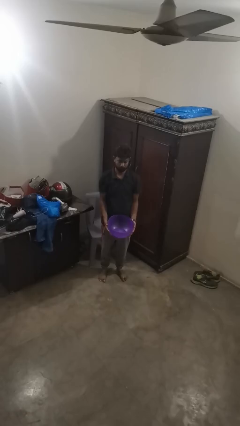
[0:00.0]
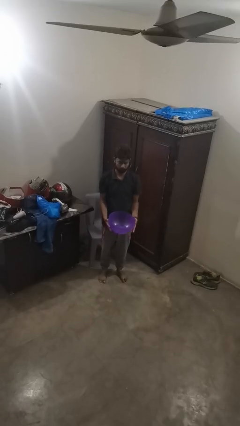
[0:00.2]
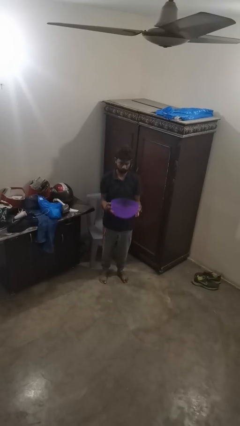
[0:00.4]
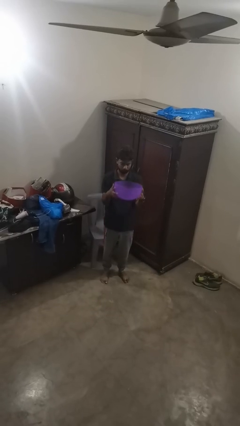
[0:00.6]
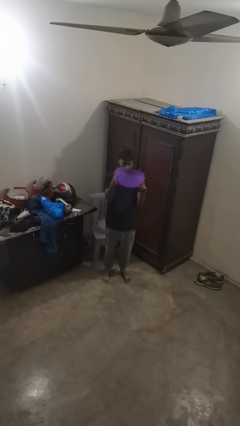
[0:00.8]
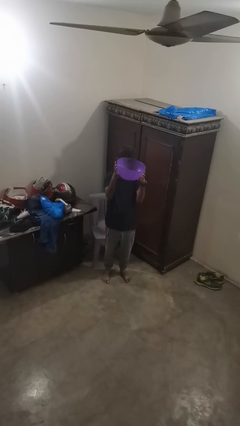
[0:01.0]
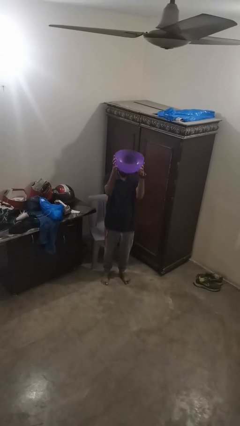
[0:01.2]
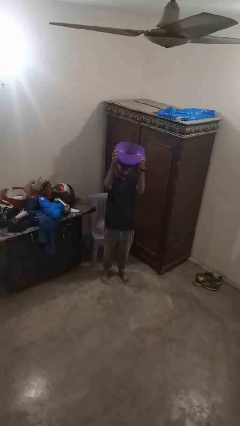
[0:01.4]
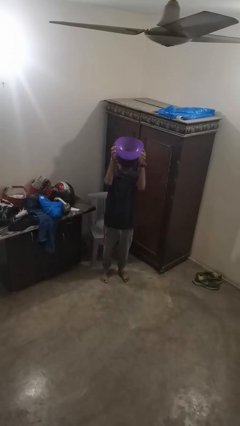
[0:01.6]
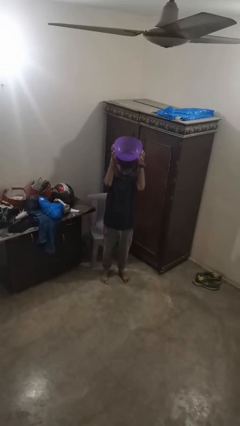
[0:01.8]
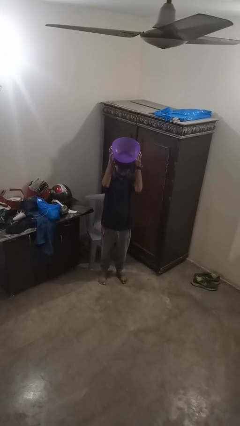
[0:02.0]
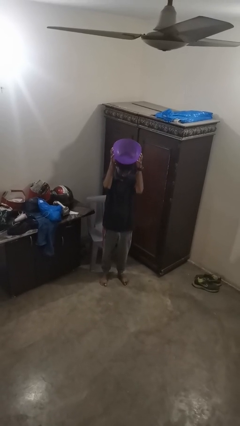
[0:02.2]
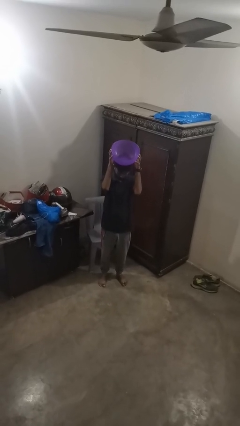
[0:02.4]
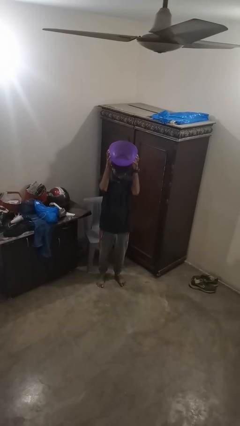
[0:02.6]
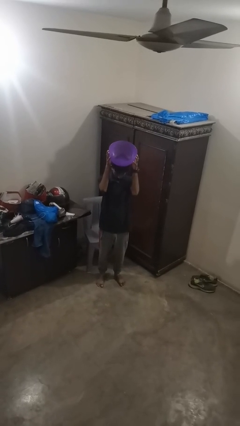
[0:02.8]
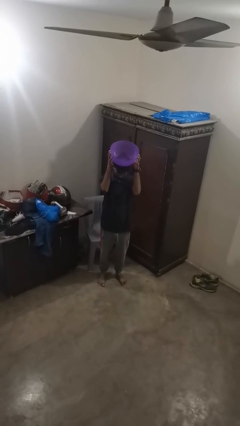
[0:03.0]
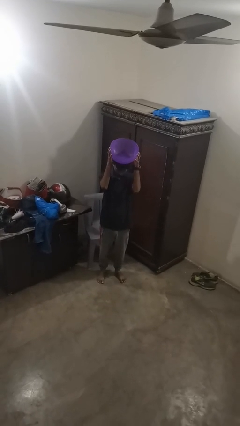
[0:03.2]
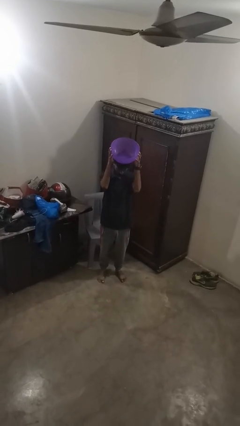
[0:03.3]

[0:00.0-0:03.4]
person holds object above head

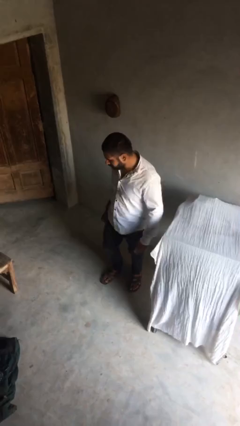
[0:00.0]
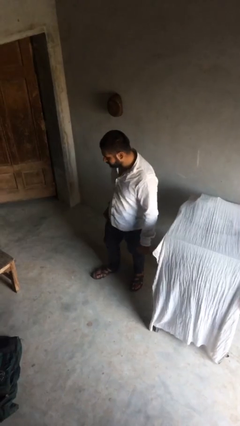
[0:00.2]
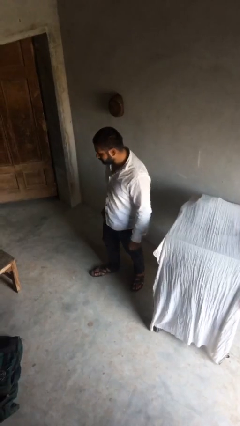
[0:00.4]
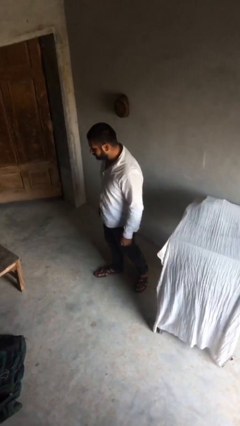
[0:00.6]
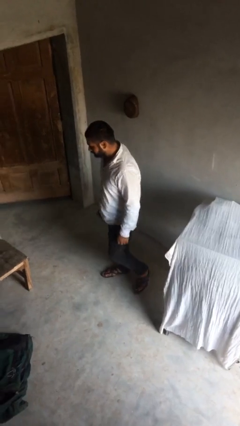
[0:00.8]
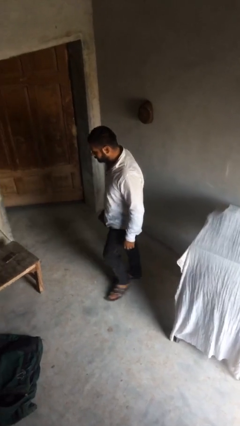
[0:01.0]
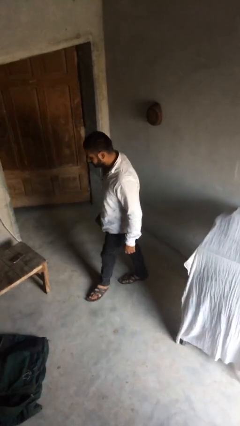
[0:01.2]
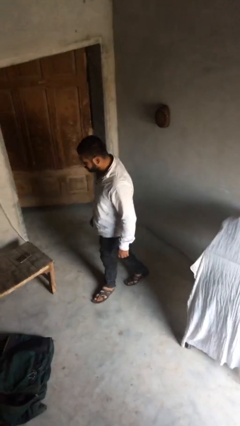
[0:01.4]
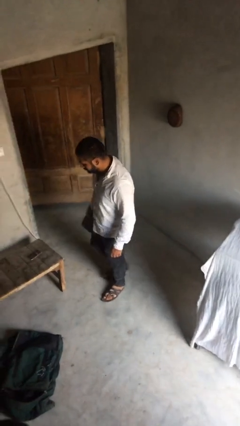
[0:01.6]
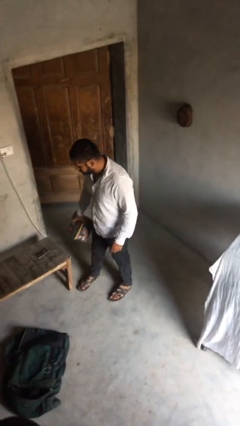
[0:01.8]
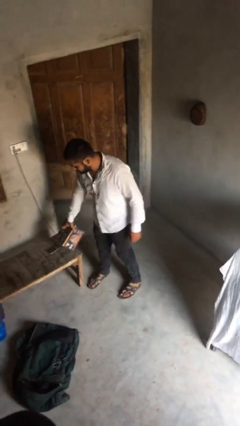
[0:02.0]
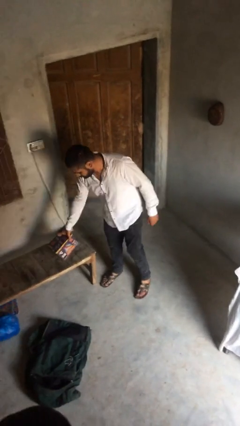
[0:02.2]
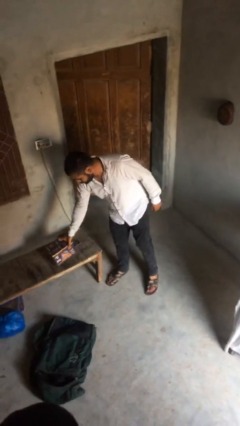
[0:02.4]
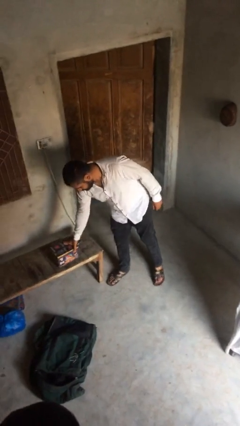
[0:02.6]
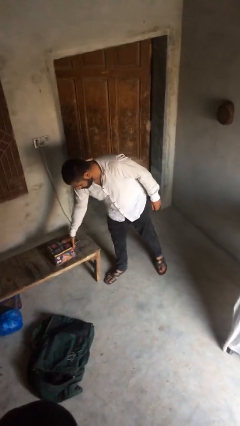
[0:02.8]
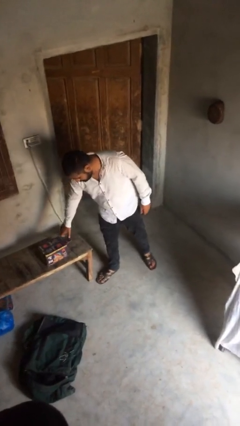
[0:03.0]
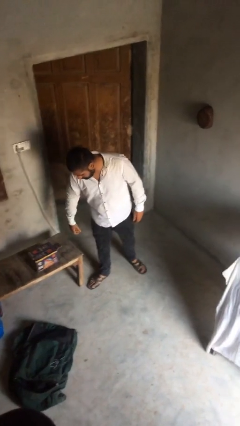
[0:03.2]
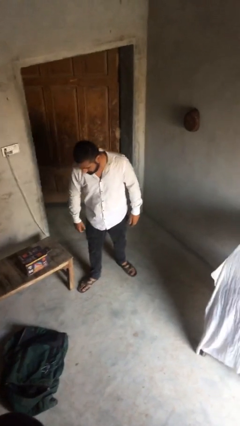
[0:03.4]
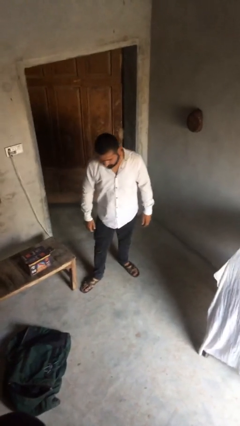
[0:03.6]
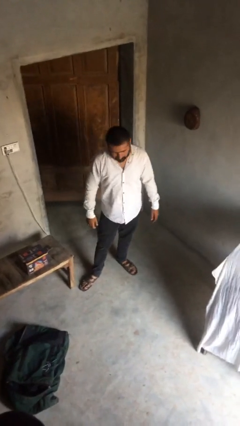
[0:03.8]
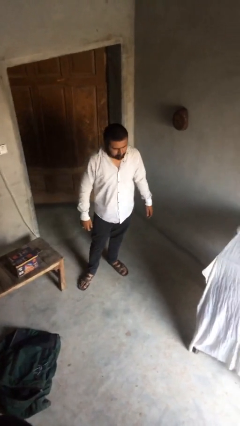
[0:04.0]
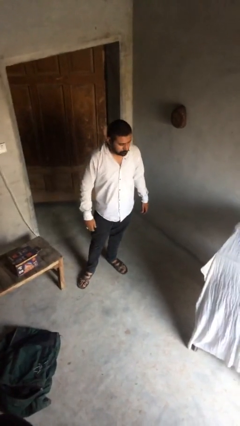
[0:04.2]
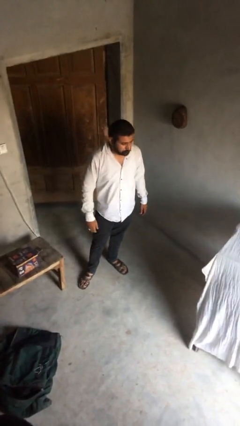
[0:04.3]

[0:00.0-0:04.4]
person puts down object on table

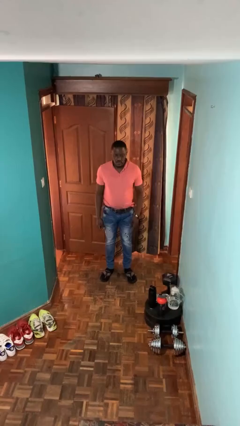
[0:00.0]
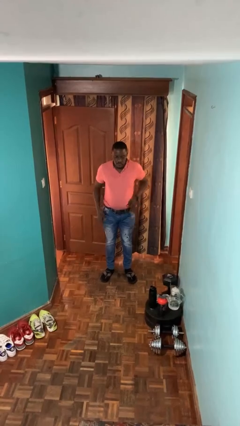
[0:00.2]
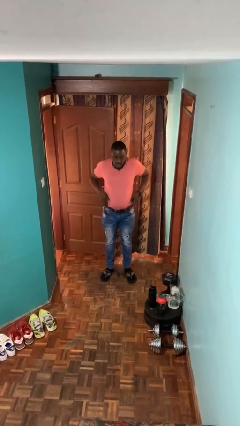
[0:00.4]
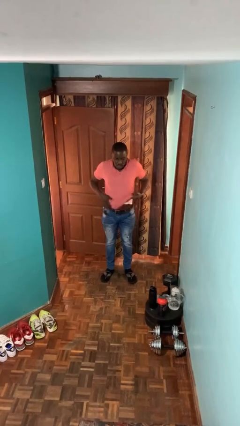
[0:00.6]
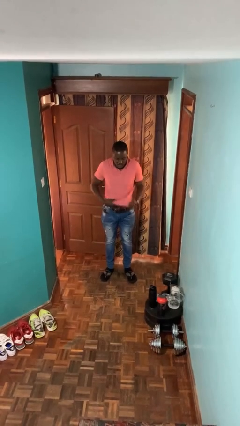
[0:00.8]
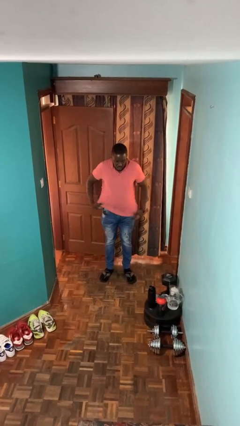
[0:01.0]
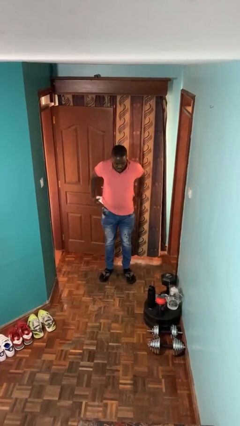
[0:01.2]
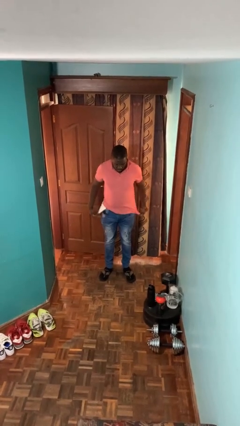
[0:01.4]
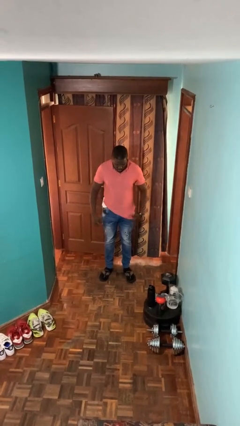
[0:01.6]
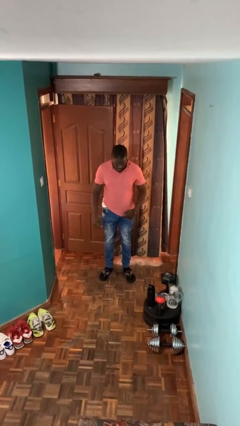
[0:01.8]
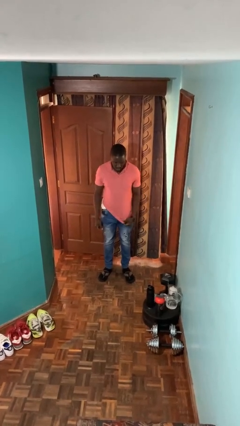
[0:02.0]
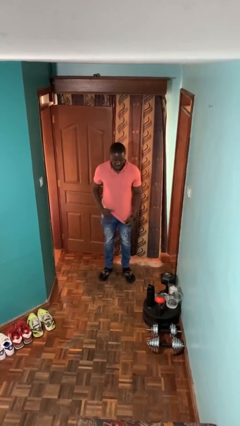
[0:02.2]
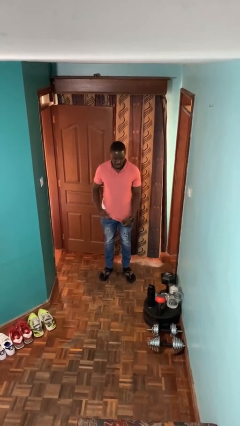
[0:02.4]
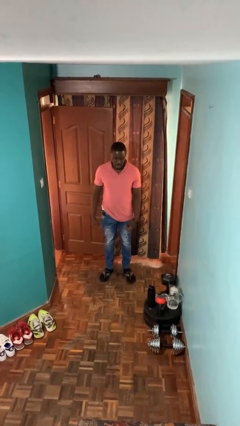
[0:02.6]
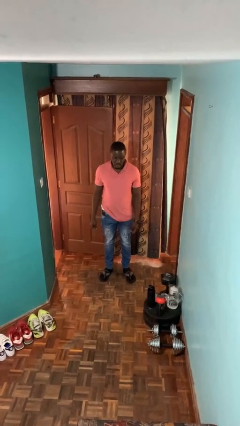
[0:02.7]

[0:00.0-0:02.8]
person untucks shirt

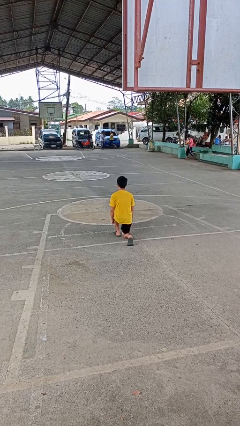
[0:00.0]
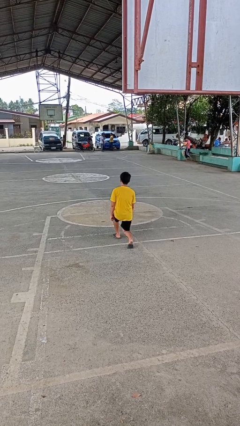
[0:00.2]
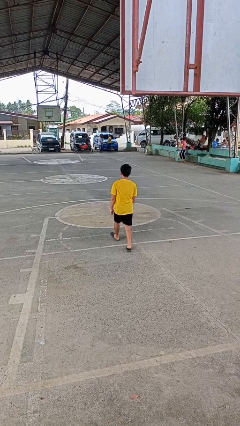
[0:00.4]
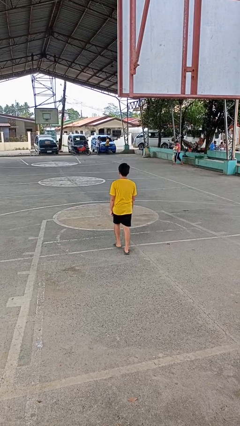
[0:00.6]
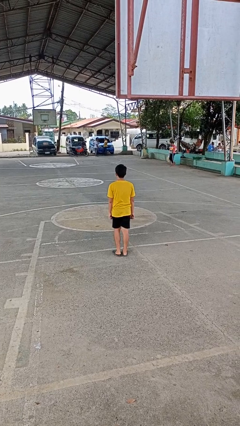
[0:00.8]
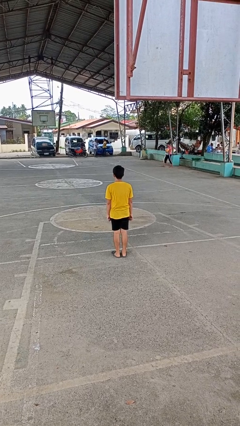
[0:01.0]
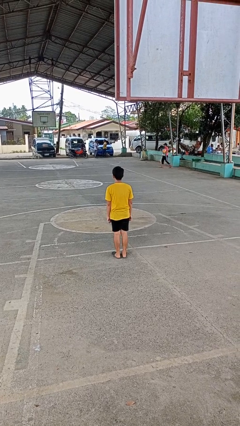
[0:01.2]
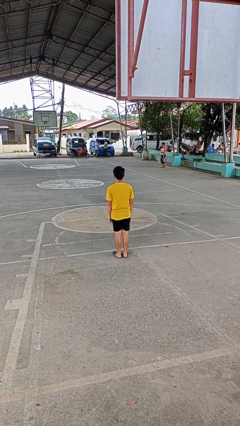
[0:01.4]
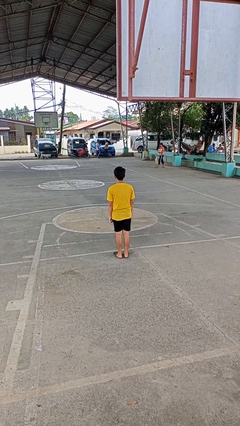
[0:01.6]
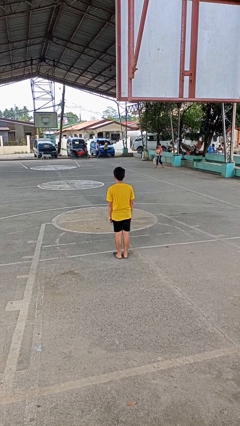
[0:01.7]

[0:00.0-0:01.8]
person stands up from floor

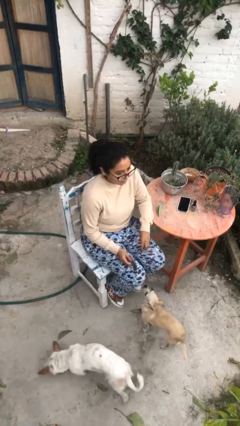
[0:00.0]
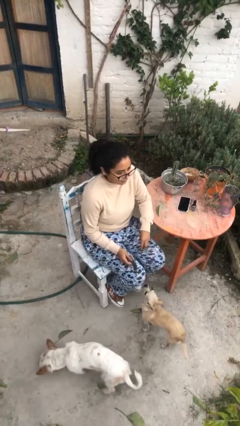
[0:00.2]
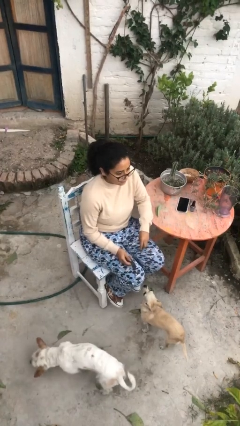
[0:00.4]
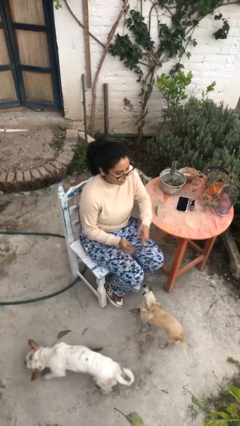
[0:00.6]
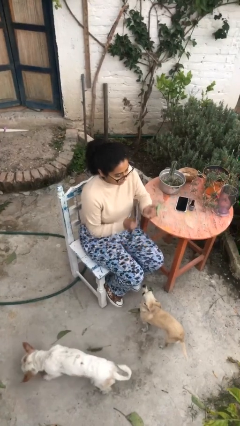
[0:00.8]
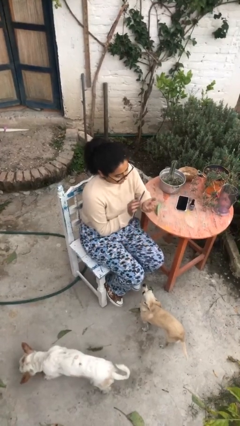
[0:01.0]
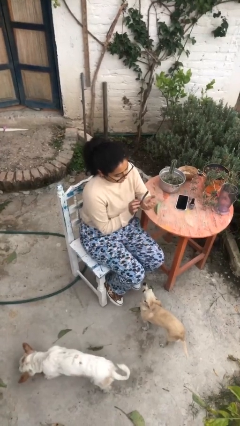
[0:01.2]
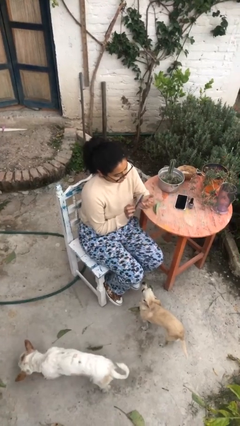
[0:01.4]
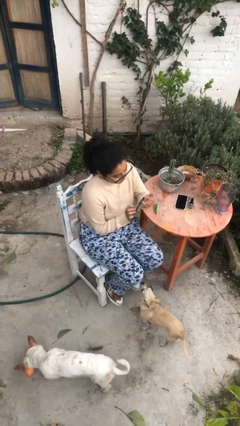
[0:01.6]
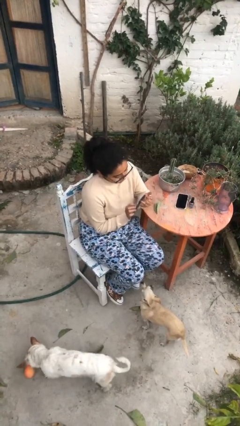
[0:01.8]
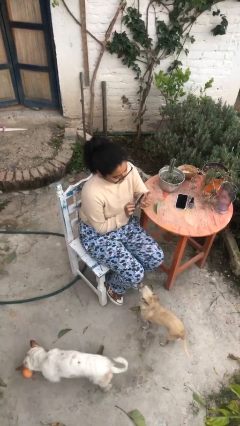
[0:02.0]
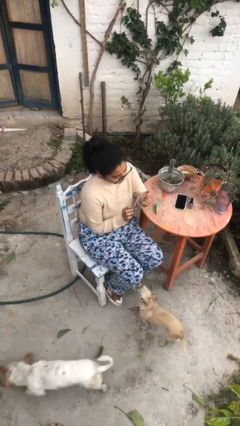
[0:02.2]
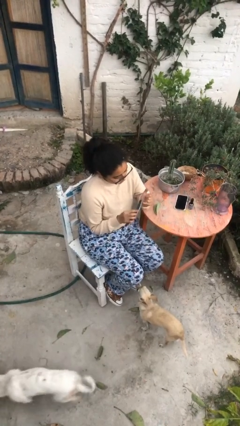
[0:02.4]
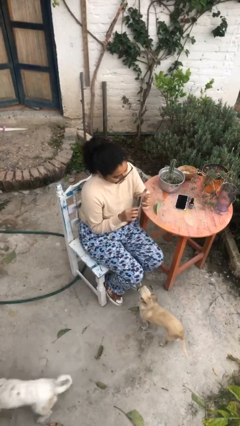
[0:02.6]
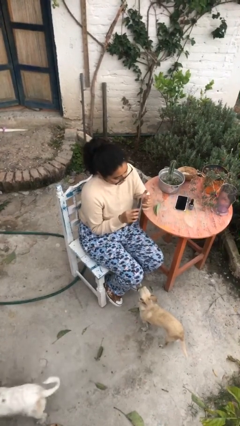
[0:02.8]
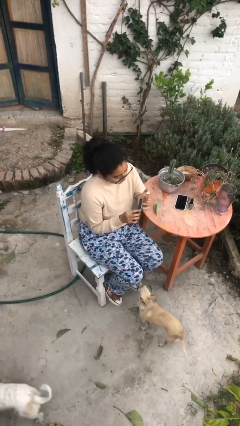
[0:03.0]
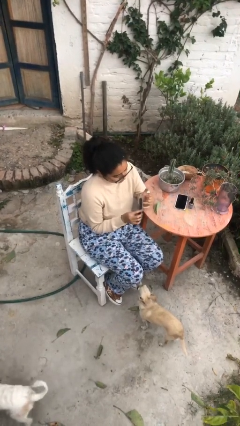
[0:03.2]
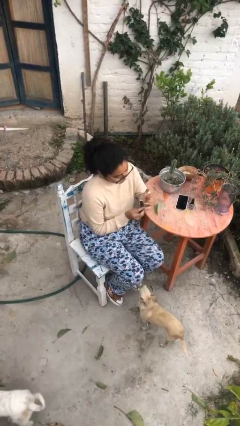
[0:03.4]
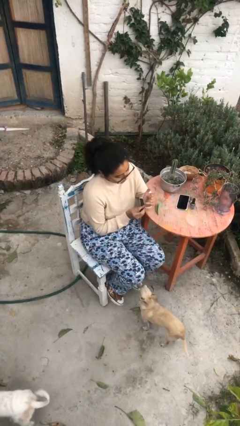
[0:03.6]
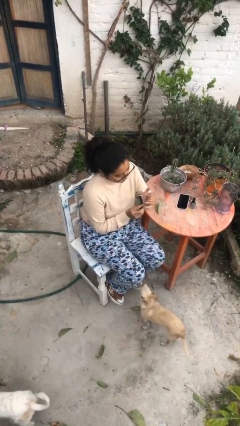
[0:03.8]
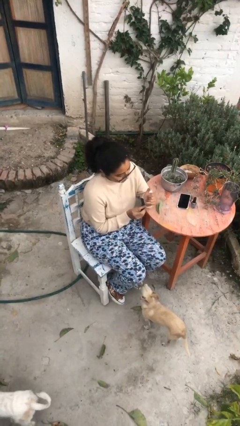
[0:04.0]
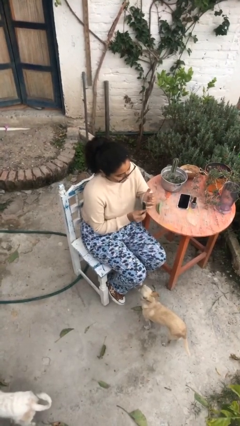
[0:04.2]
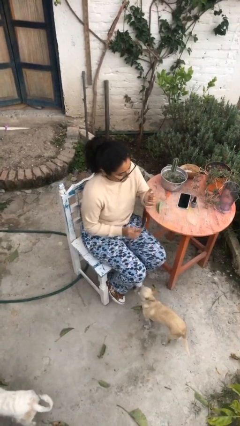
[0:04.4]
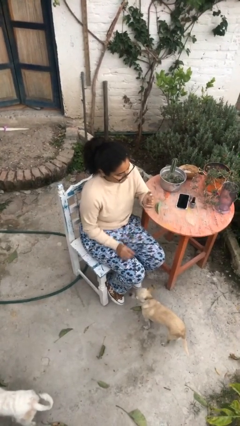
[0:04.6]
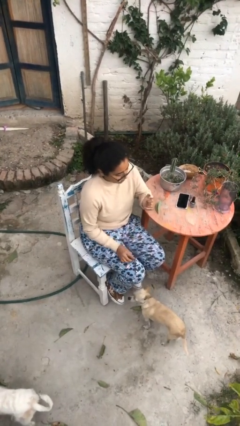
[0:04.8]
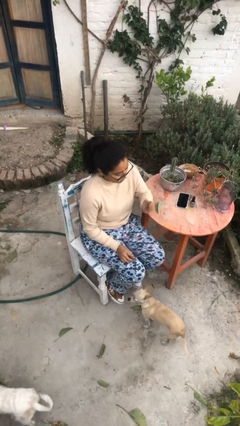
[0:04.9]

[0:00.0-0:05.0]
person files fingernails
